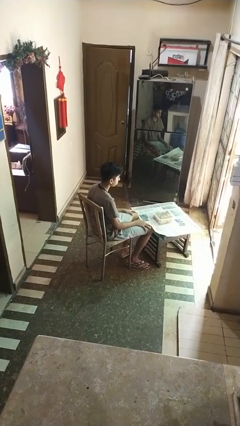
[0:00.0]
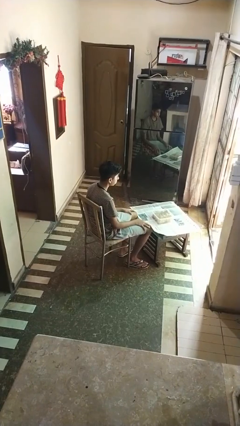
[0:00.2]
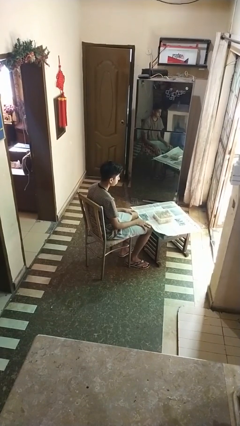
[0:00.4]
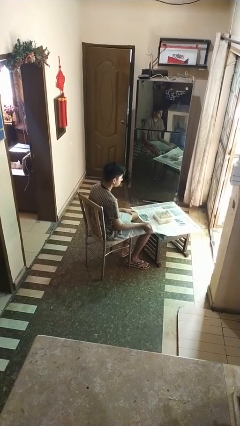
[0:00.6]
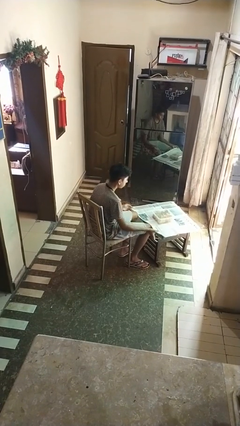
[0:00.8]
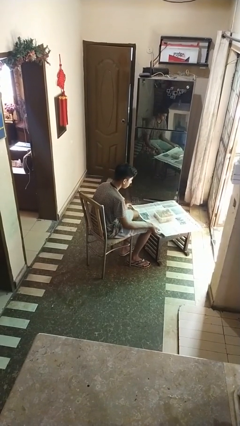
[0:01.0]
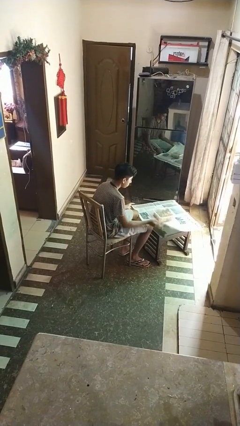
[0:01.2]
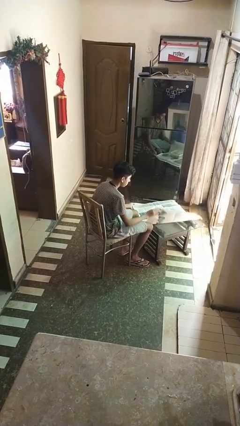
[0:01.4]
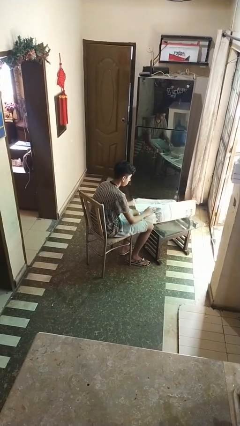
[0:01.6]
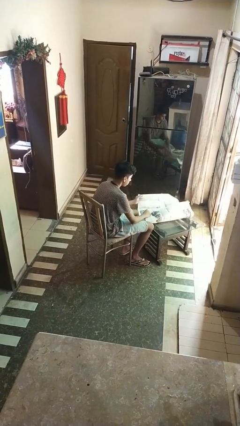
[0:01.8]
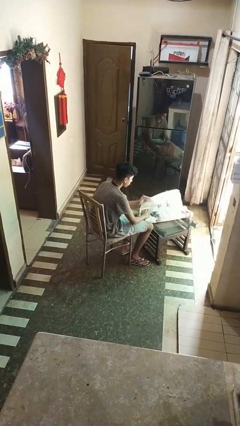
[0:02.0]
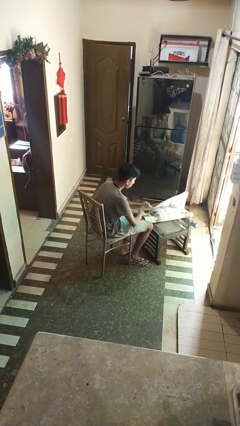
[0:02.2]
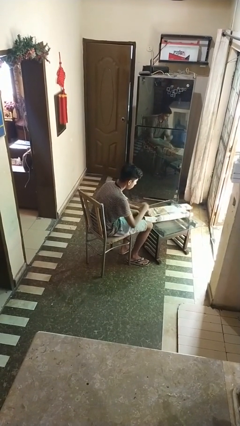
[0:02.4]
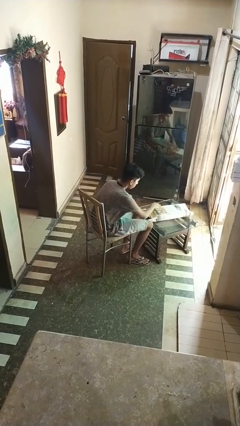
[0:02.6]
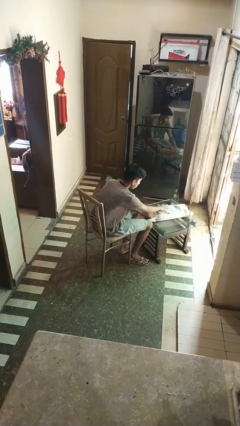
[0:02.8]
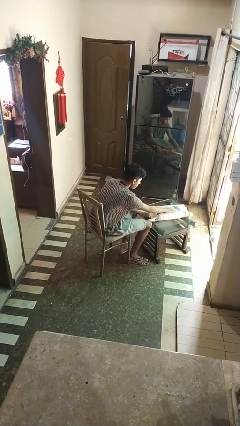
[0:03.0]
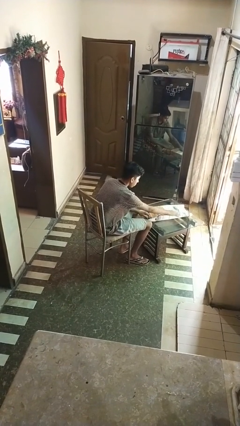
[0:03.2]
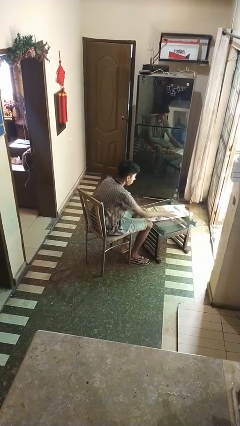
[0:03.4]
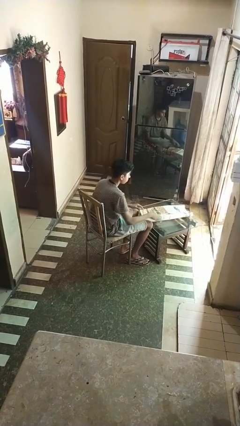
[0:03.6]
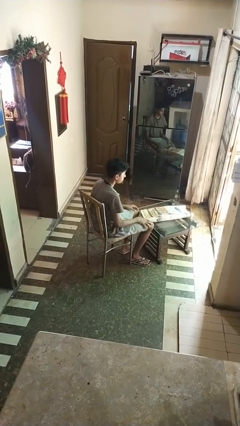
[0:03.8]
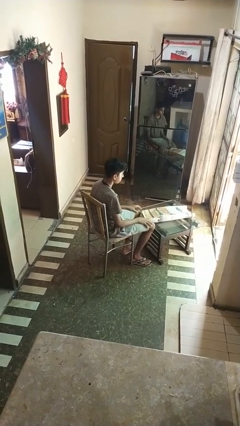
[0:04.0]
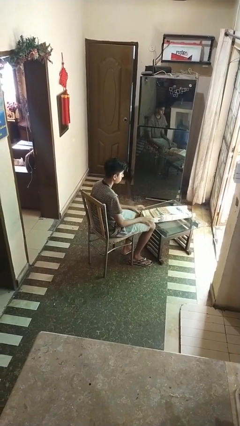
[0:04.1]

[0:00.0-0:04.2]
person wraps box

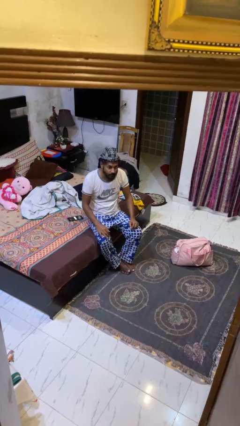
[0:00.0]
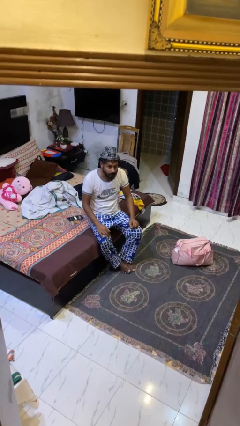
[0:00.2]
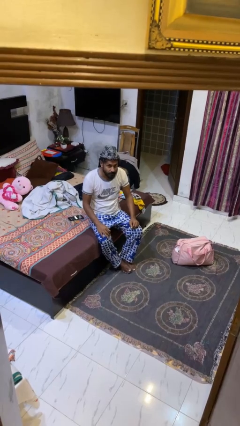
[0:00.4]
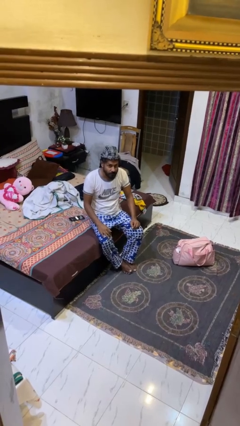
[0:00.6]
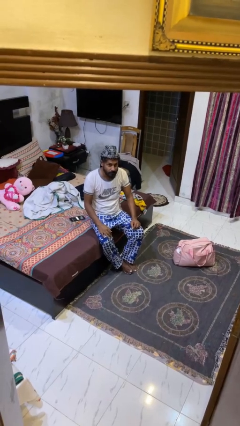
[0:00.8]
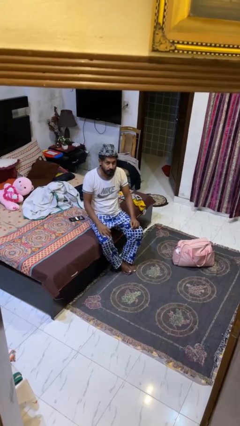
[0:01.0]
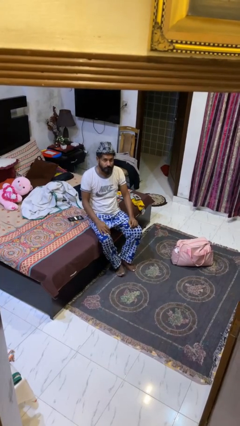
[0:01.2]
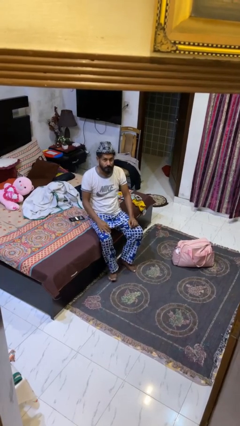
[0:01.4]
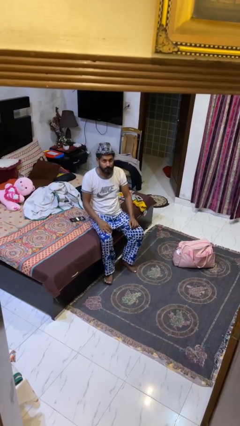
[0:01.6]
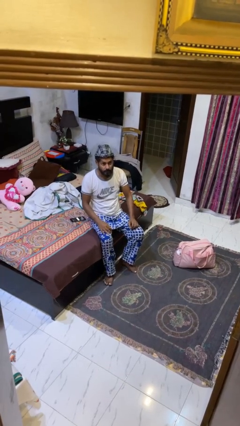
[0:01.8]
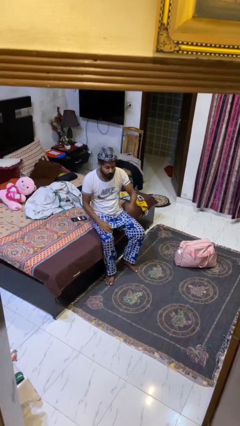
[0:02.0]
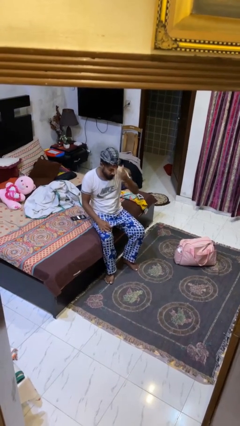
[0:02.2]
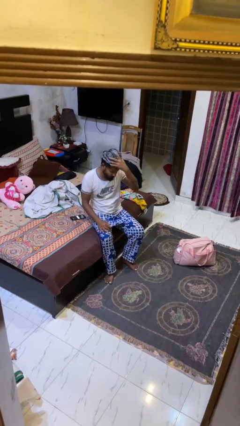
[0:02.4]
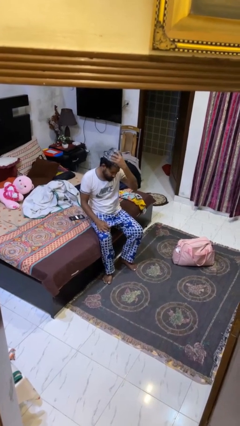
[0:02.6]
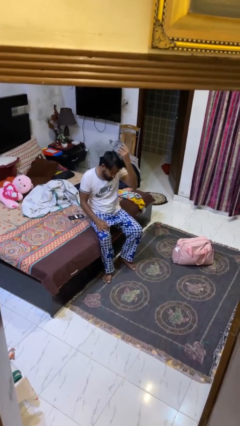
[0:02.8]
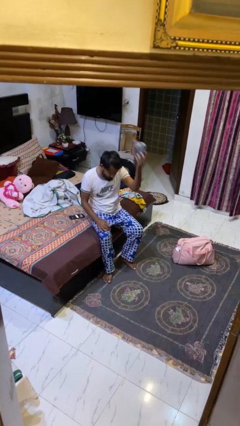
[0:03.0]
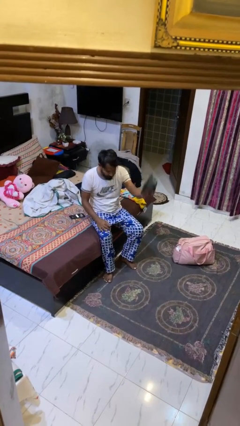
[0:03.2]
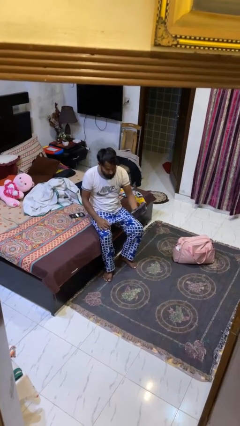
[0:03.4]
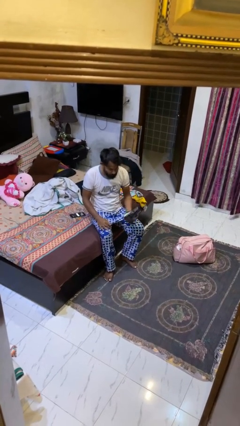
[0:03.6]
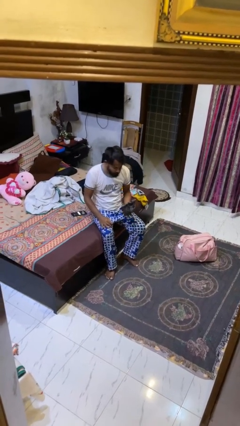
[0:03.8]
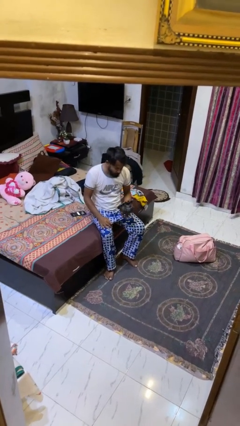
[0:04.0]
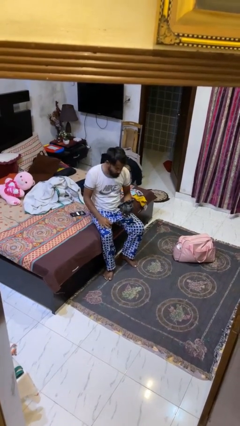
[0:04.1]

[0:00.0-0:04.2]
person takes off hat

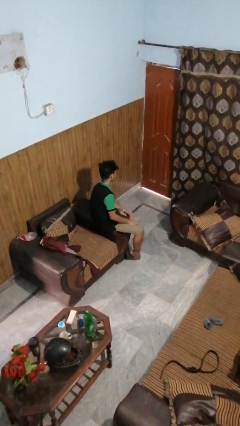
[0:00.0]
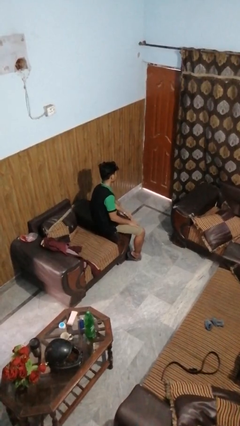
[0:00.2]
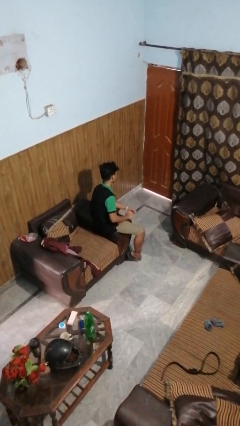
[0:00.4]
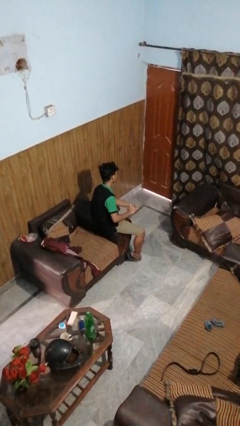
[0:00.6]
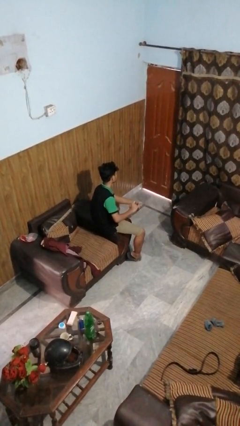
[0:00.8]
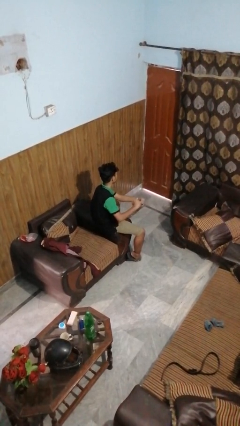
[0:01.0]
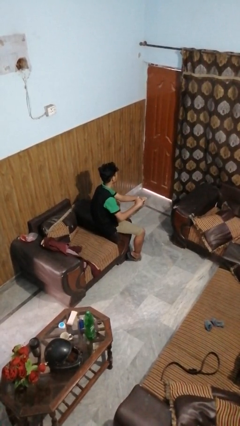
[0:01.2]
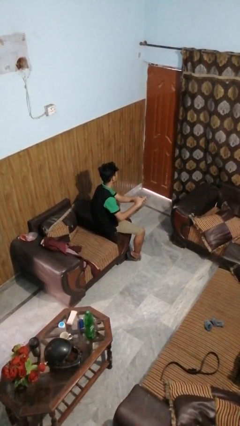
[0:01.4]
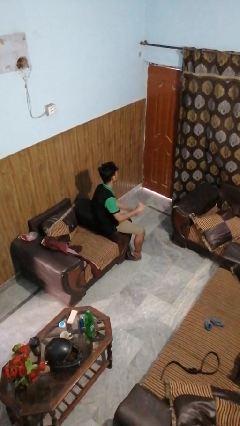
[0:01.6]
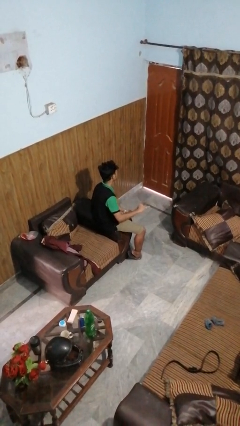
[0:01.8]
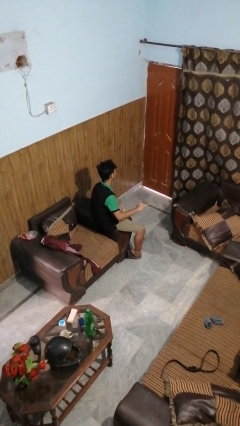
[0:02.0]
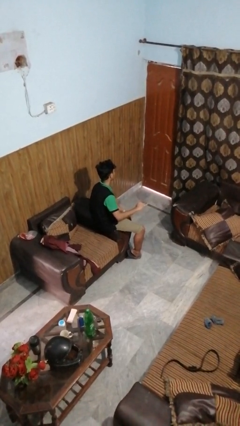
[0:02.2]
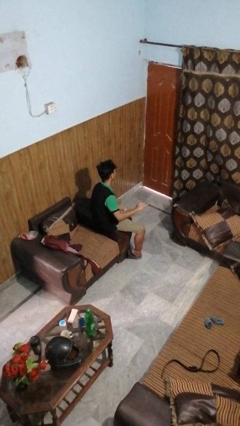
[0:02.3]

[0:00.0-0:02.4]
person puts on ring

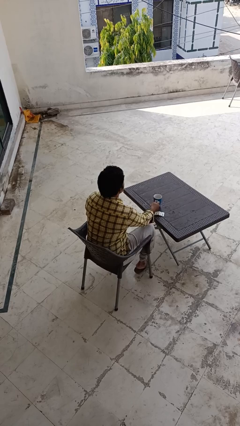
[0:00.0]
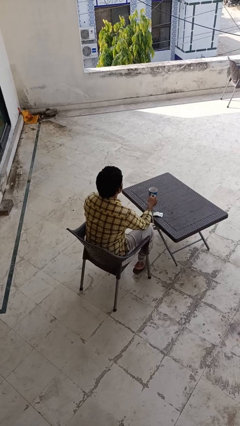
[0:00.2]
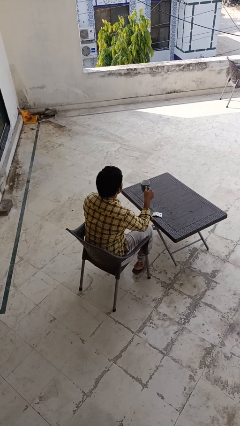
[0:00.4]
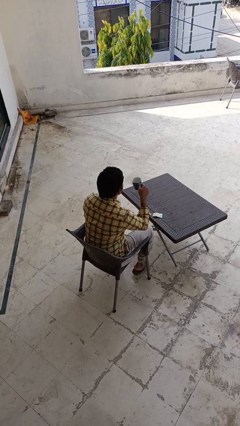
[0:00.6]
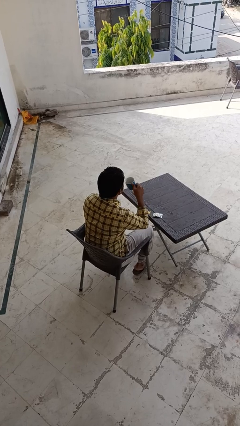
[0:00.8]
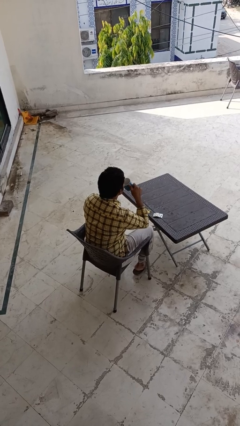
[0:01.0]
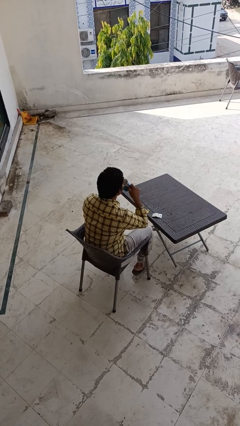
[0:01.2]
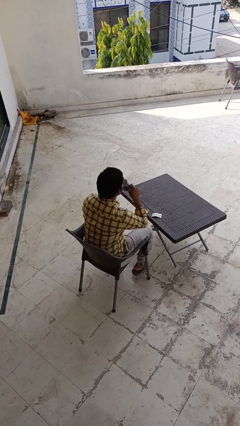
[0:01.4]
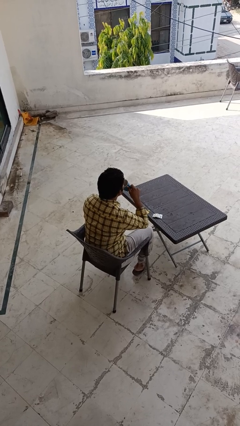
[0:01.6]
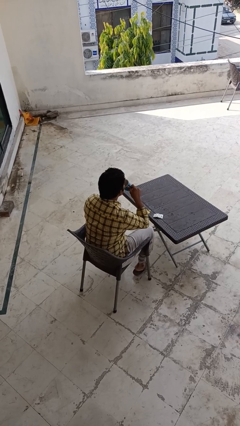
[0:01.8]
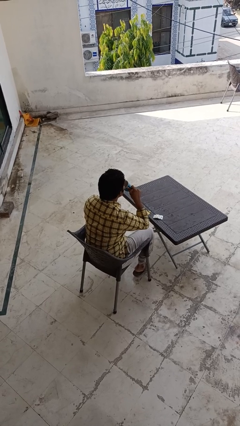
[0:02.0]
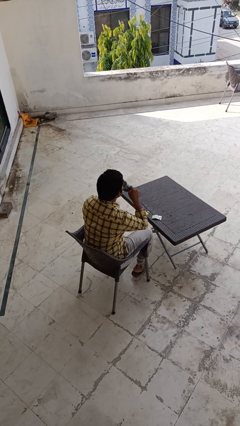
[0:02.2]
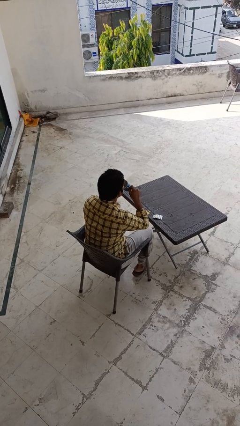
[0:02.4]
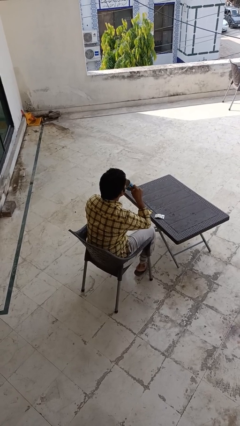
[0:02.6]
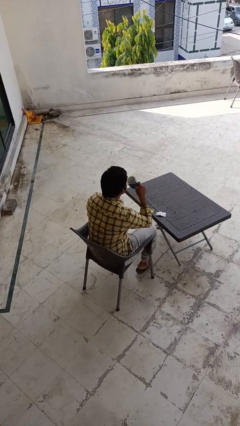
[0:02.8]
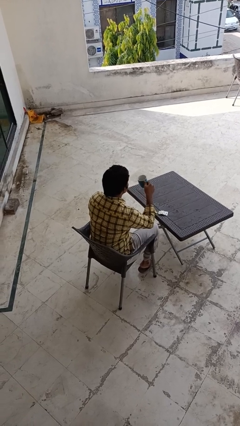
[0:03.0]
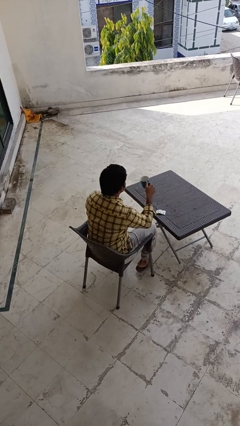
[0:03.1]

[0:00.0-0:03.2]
person drinks from cup

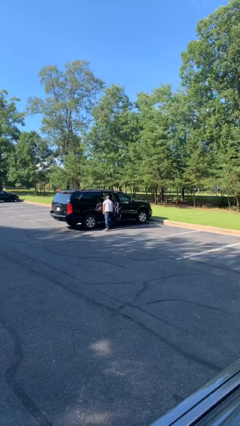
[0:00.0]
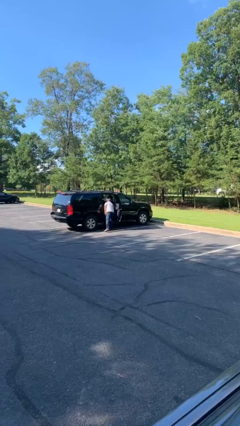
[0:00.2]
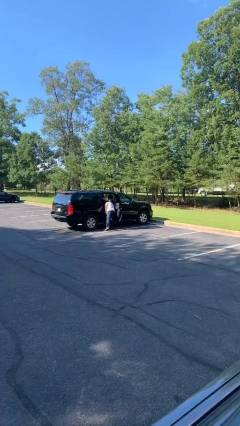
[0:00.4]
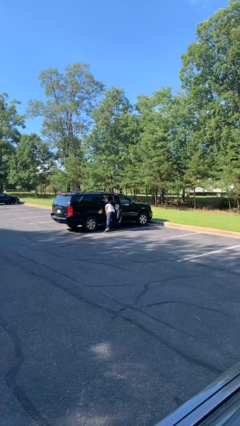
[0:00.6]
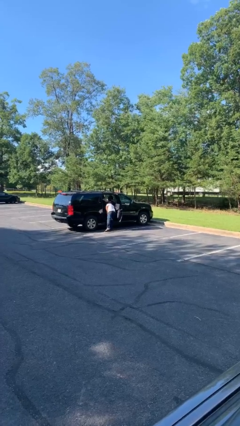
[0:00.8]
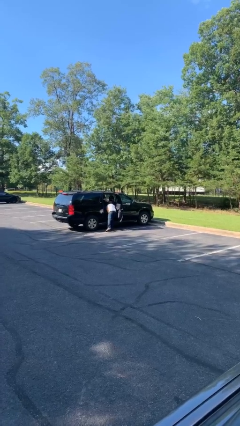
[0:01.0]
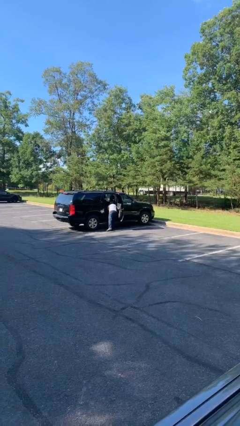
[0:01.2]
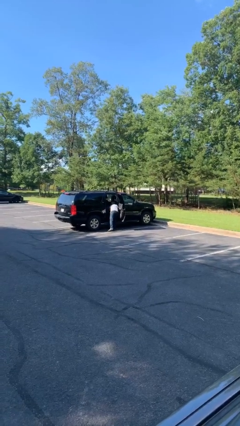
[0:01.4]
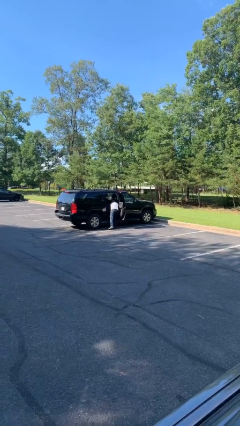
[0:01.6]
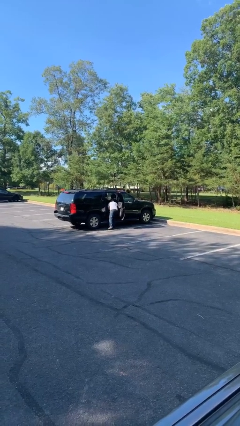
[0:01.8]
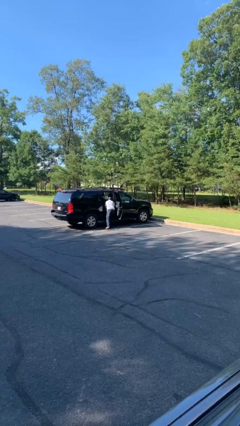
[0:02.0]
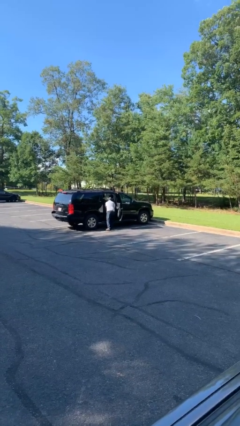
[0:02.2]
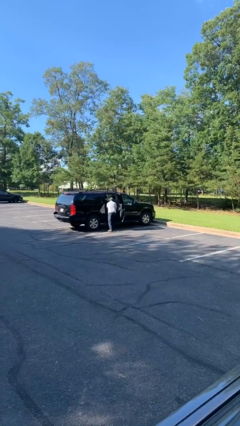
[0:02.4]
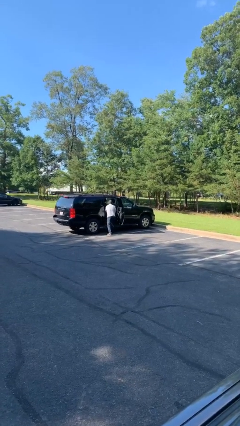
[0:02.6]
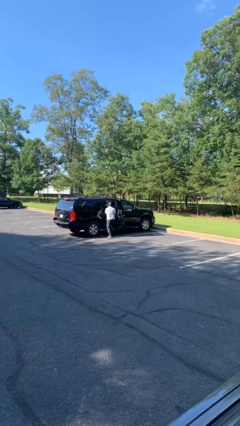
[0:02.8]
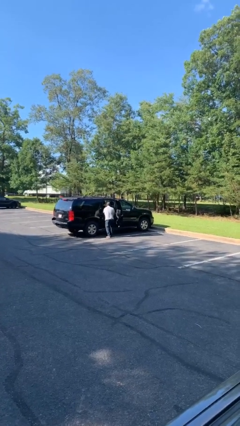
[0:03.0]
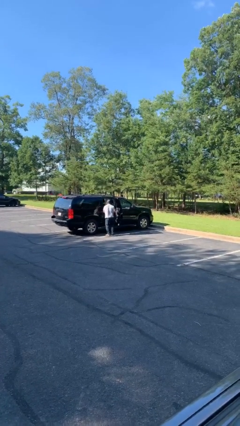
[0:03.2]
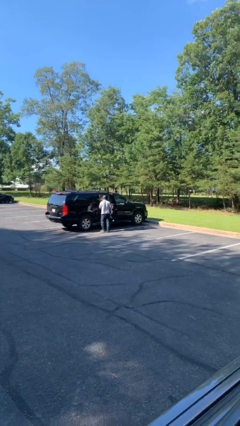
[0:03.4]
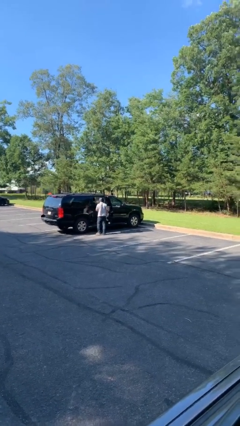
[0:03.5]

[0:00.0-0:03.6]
person unloads car
